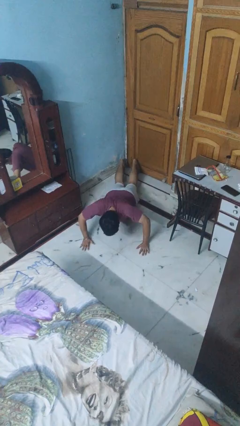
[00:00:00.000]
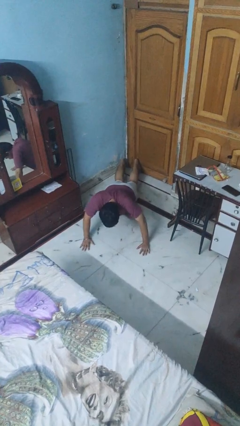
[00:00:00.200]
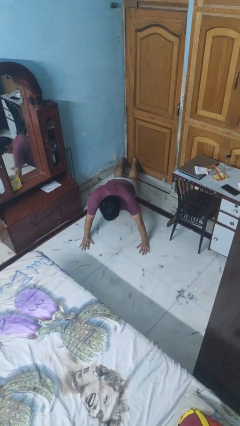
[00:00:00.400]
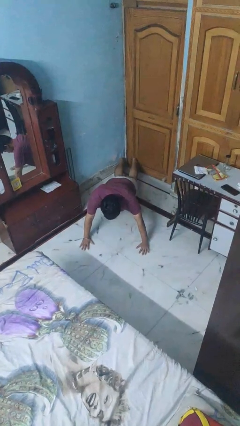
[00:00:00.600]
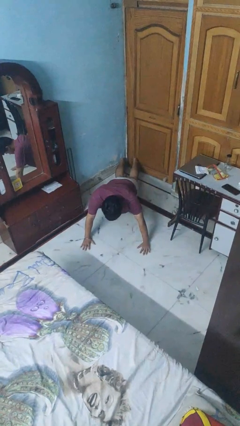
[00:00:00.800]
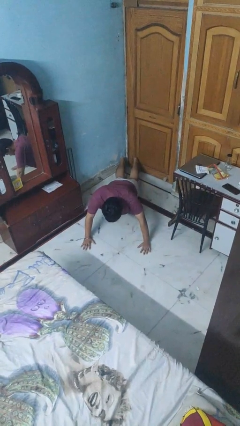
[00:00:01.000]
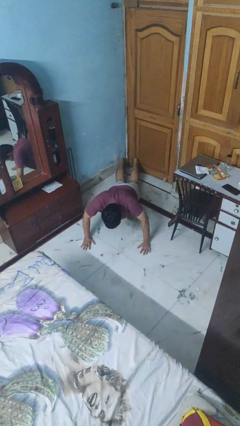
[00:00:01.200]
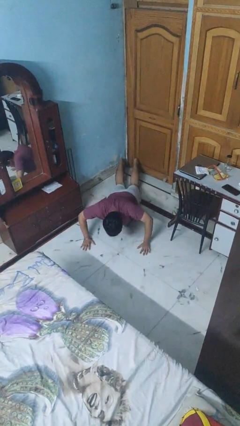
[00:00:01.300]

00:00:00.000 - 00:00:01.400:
person exercises with pushup

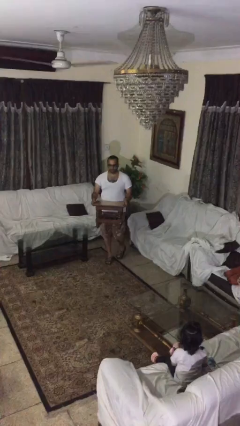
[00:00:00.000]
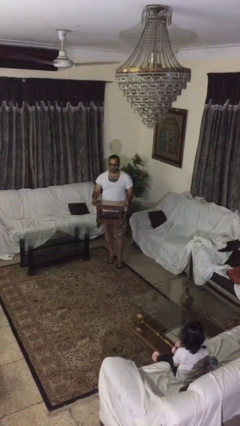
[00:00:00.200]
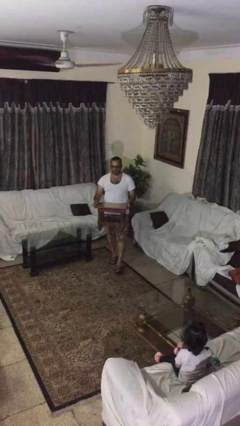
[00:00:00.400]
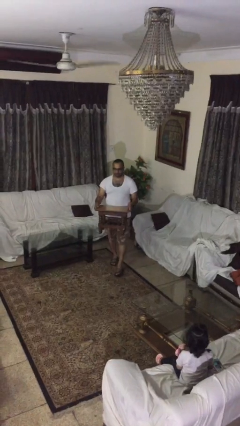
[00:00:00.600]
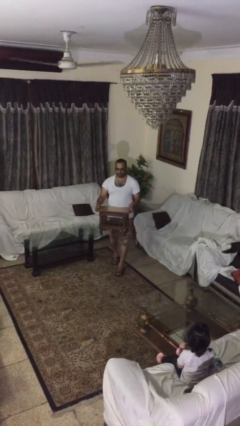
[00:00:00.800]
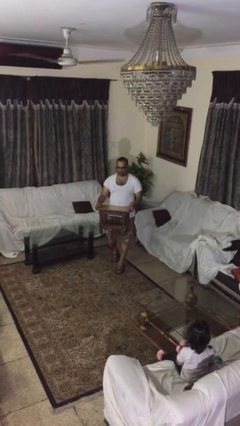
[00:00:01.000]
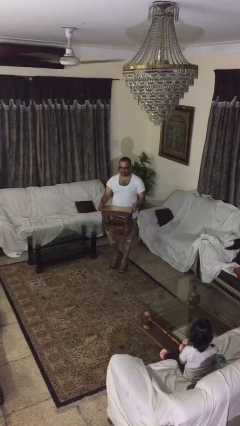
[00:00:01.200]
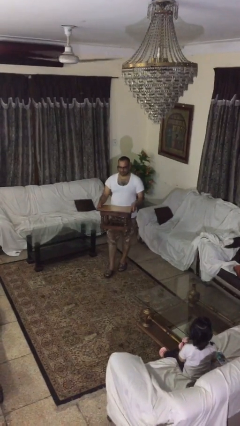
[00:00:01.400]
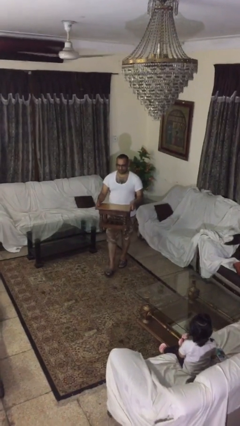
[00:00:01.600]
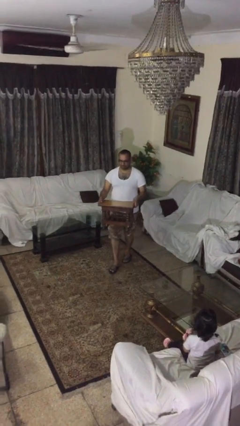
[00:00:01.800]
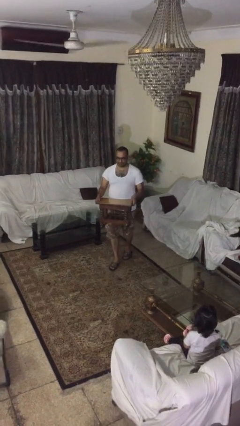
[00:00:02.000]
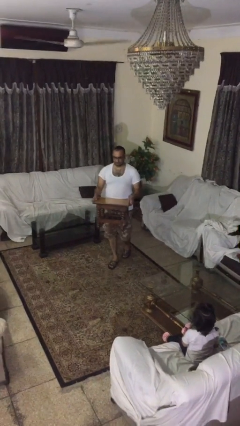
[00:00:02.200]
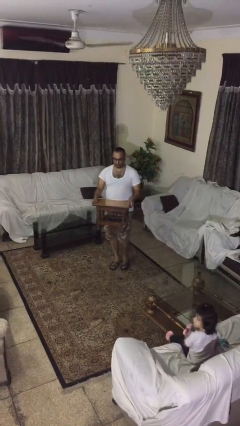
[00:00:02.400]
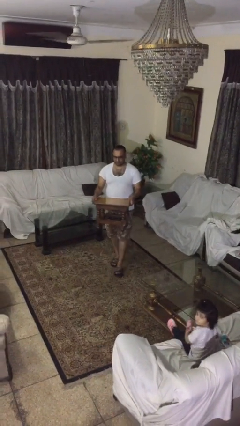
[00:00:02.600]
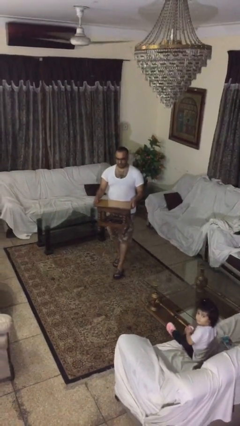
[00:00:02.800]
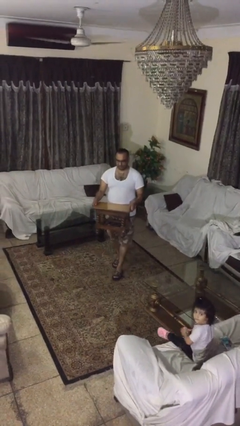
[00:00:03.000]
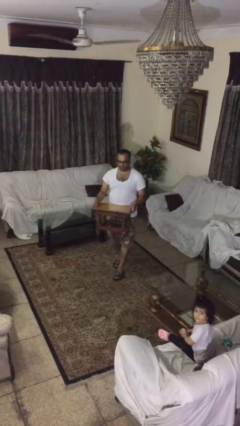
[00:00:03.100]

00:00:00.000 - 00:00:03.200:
person puts down object on floor

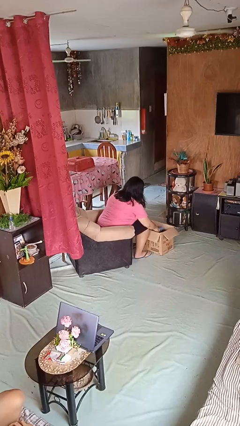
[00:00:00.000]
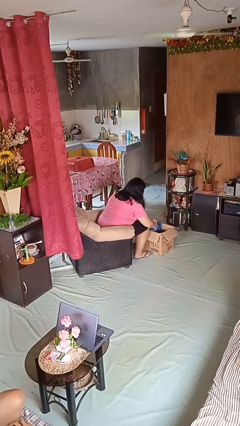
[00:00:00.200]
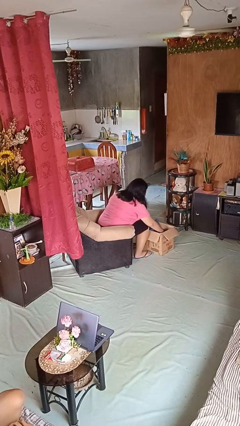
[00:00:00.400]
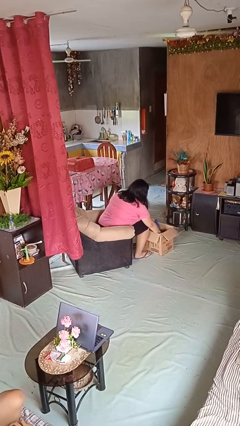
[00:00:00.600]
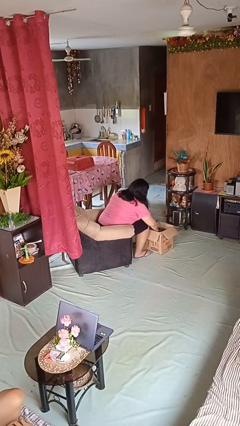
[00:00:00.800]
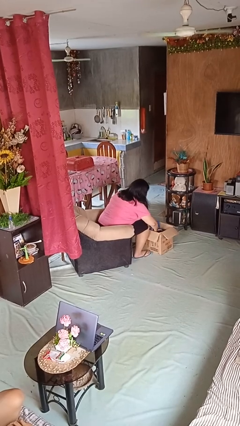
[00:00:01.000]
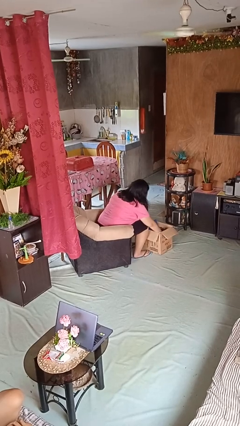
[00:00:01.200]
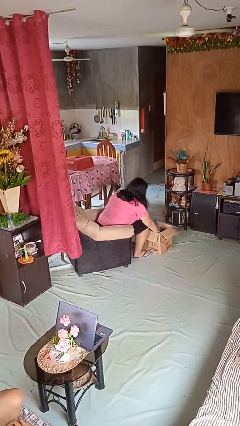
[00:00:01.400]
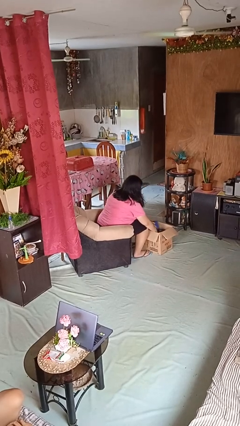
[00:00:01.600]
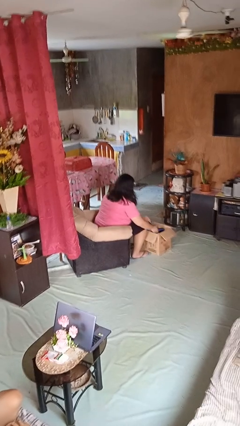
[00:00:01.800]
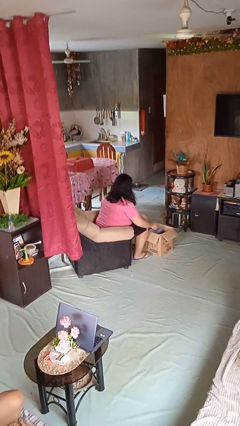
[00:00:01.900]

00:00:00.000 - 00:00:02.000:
person searches in box

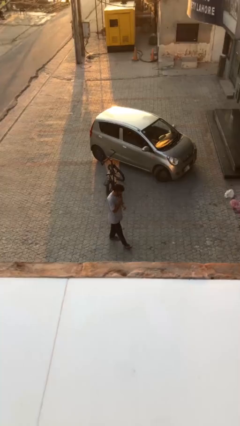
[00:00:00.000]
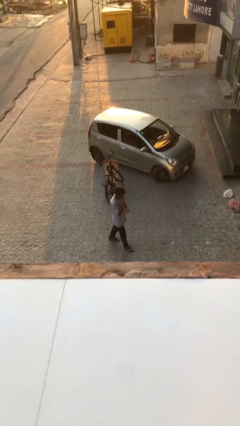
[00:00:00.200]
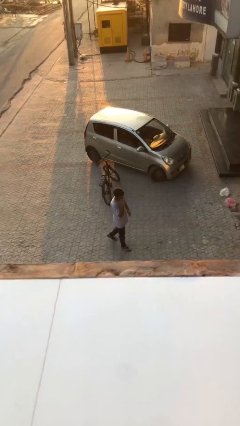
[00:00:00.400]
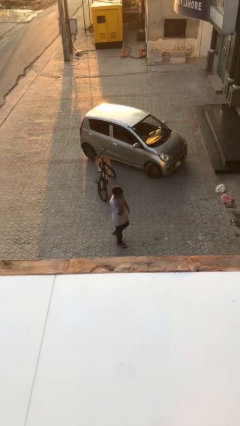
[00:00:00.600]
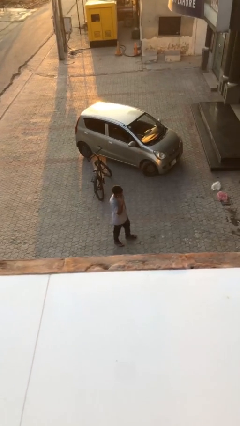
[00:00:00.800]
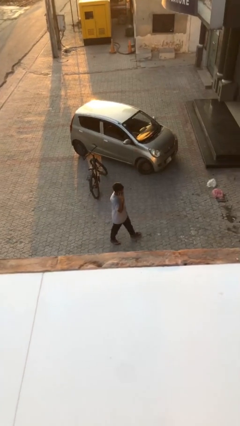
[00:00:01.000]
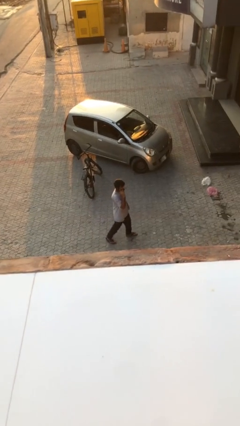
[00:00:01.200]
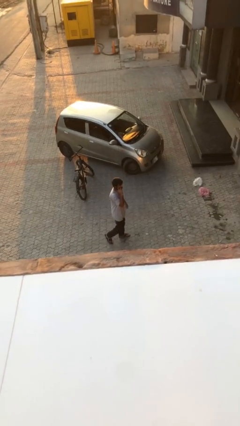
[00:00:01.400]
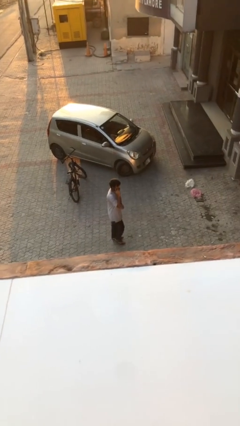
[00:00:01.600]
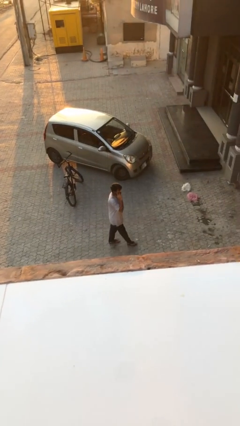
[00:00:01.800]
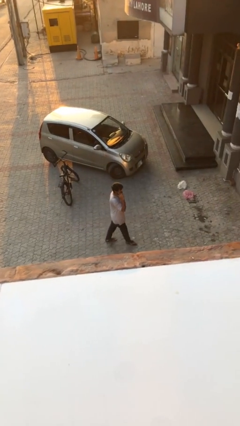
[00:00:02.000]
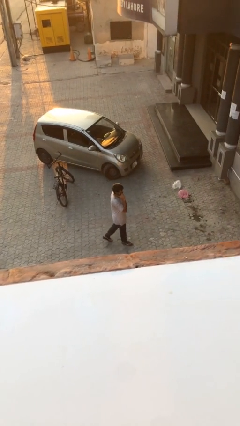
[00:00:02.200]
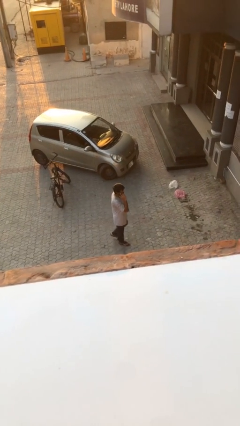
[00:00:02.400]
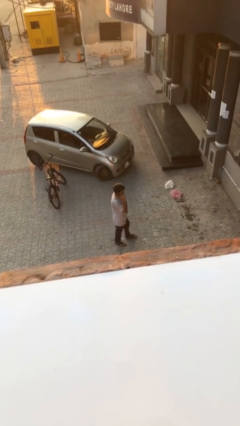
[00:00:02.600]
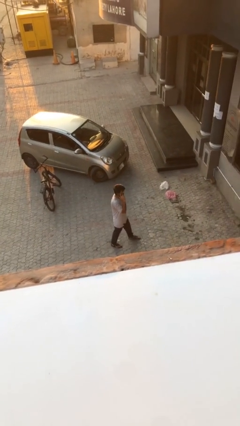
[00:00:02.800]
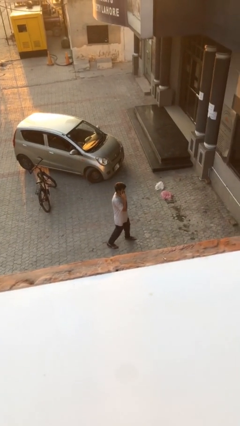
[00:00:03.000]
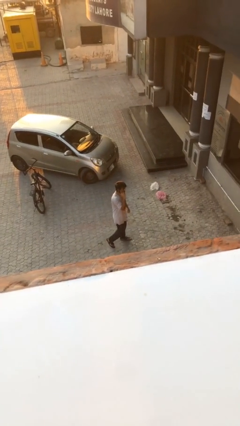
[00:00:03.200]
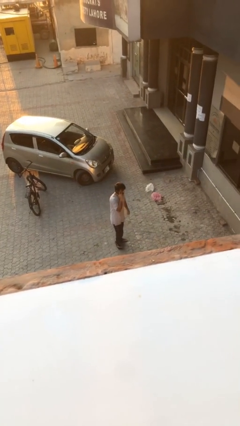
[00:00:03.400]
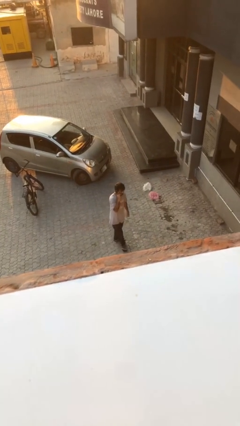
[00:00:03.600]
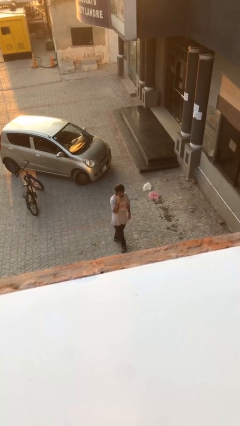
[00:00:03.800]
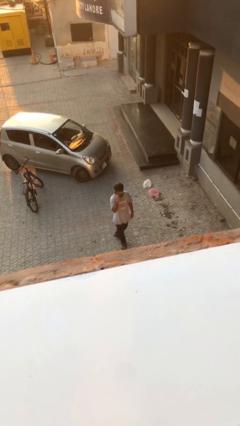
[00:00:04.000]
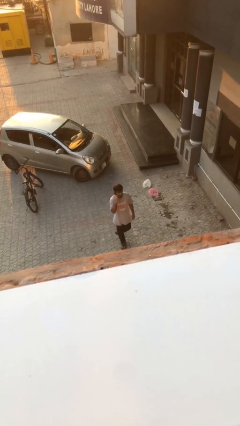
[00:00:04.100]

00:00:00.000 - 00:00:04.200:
person talks on phone

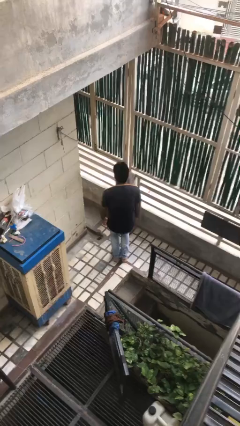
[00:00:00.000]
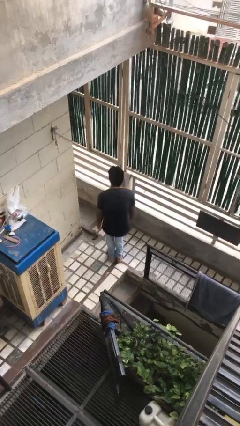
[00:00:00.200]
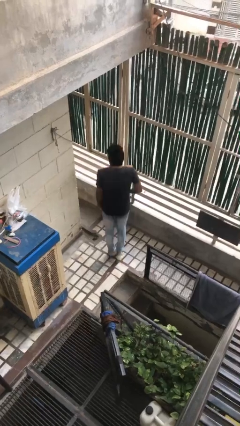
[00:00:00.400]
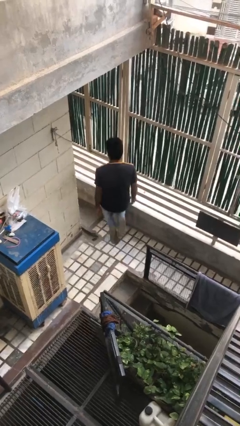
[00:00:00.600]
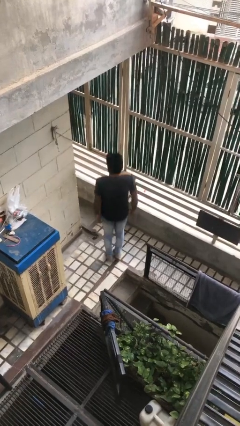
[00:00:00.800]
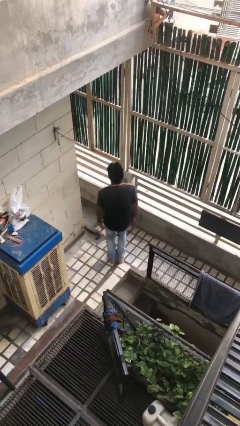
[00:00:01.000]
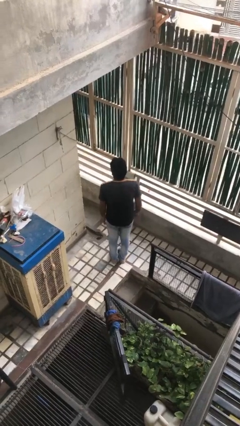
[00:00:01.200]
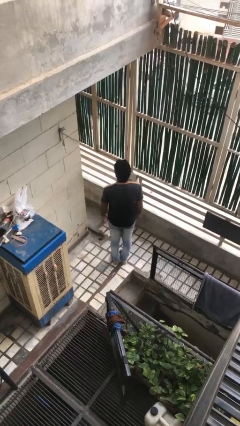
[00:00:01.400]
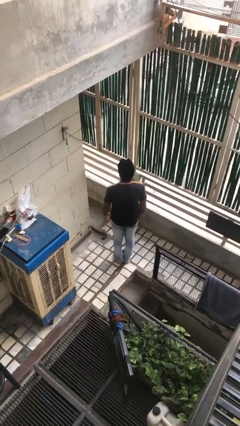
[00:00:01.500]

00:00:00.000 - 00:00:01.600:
person jumps

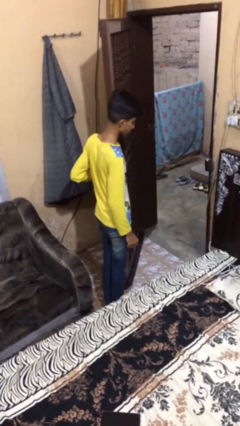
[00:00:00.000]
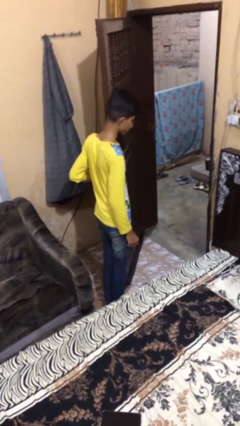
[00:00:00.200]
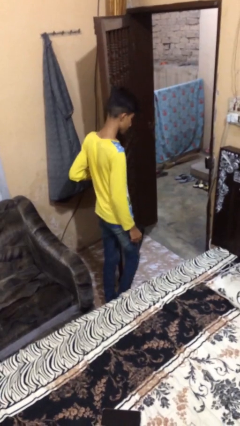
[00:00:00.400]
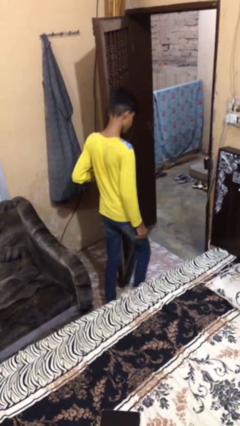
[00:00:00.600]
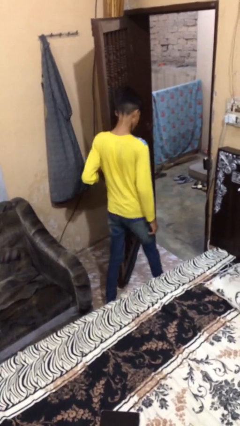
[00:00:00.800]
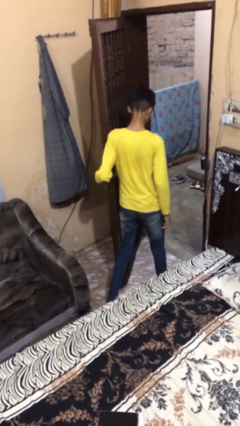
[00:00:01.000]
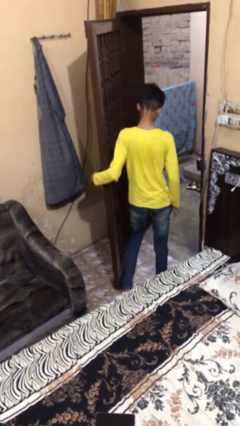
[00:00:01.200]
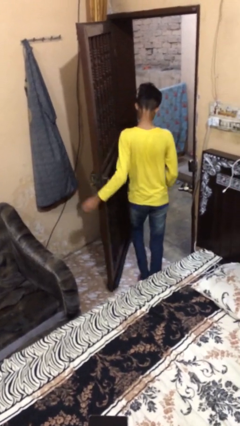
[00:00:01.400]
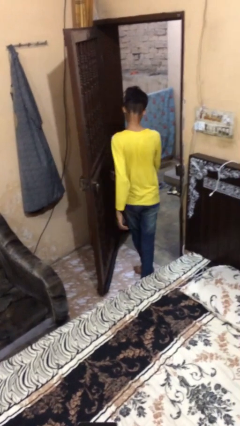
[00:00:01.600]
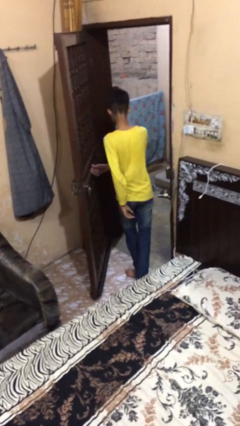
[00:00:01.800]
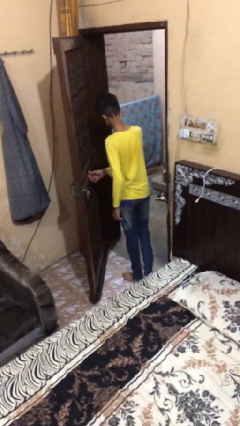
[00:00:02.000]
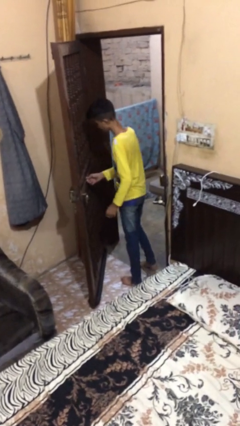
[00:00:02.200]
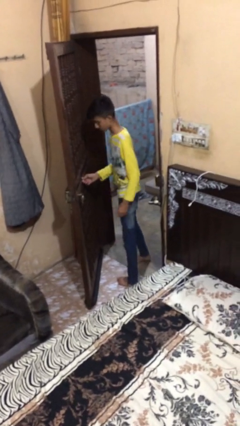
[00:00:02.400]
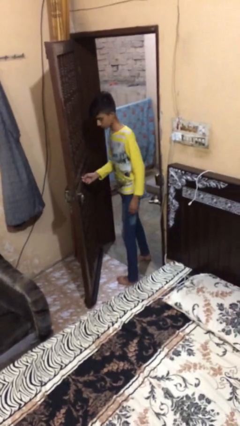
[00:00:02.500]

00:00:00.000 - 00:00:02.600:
person exits scene through structure

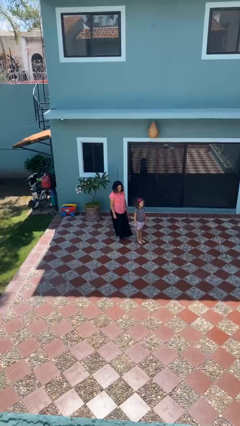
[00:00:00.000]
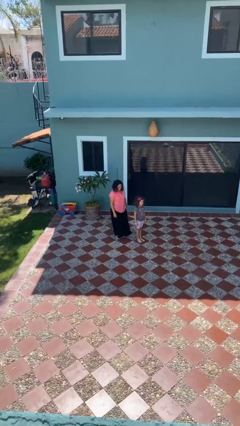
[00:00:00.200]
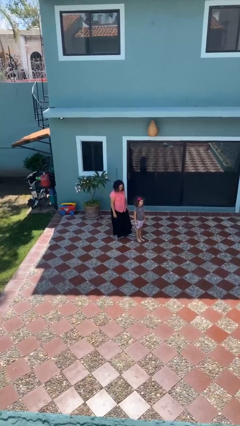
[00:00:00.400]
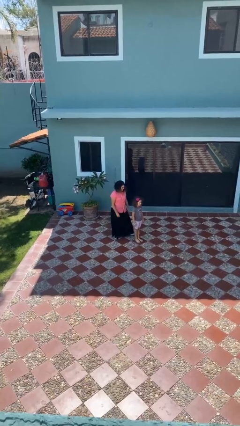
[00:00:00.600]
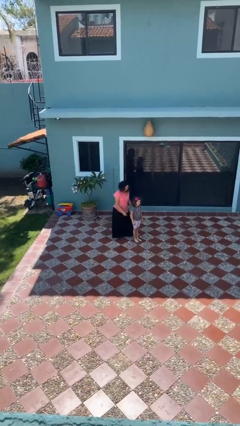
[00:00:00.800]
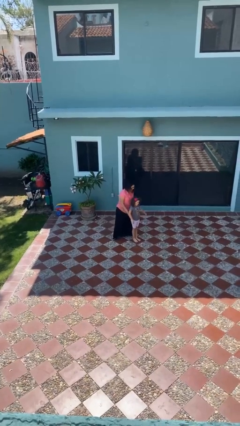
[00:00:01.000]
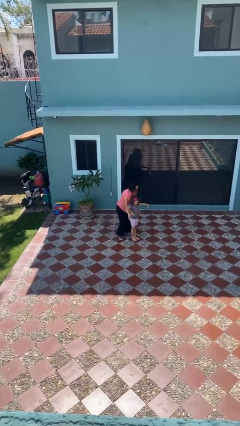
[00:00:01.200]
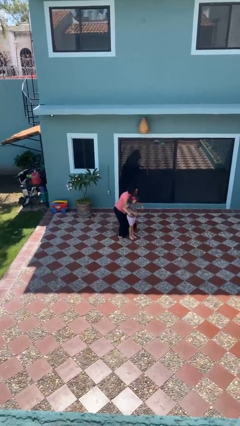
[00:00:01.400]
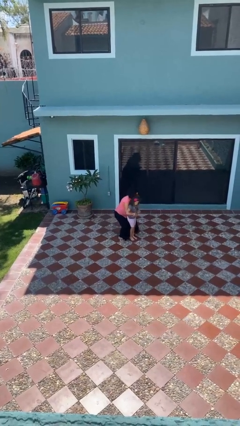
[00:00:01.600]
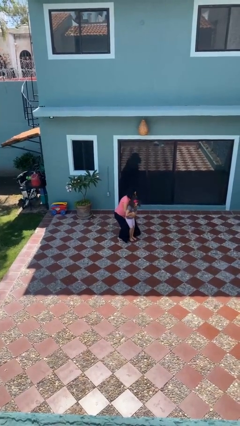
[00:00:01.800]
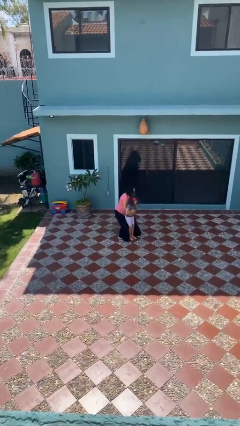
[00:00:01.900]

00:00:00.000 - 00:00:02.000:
person picks up person
